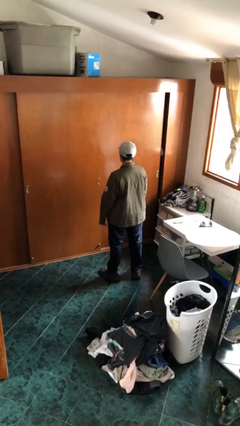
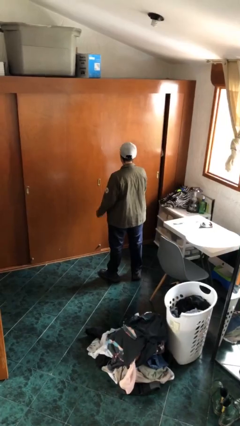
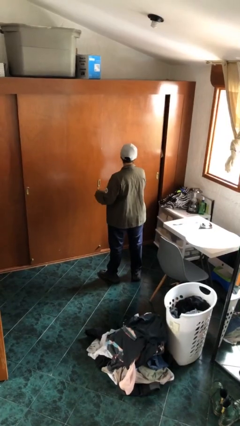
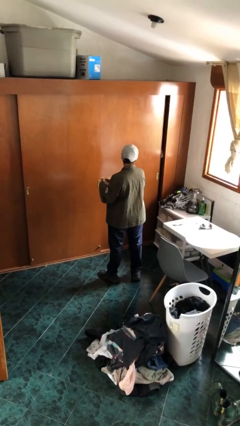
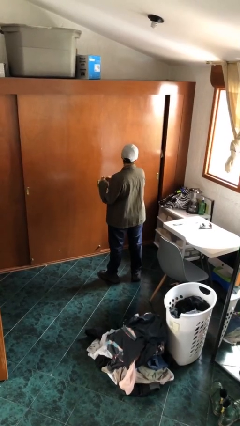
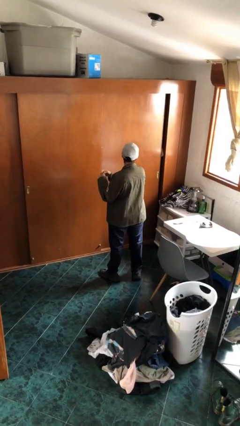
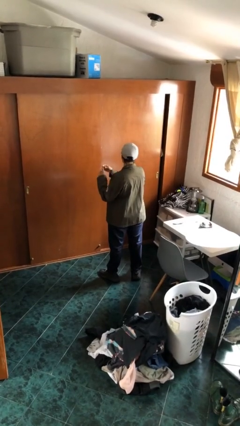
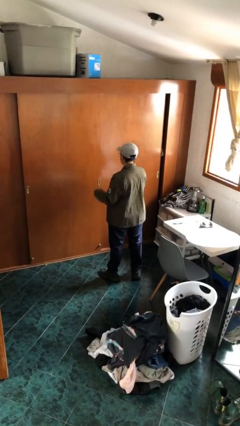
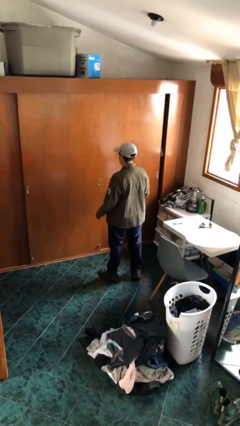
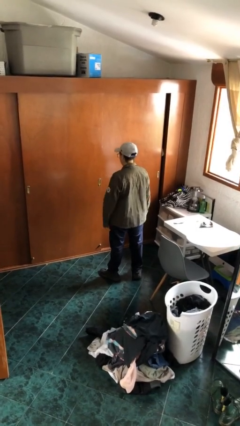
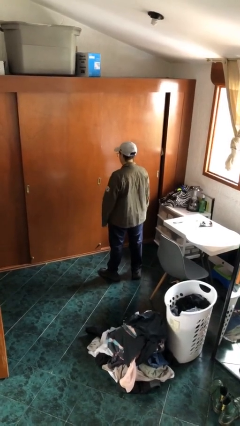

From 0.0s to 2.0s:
person takes off ring

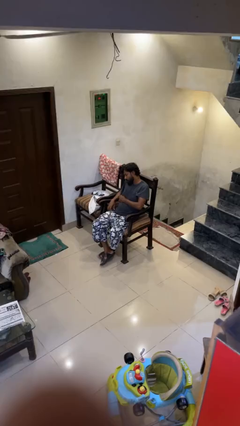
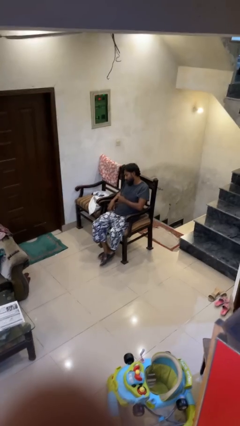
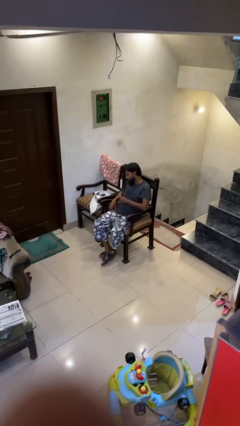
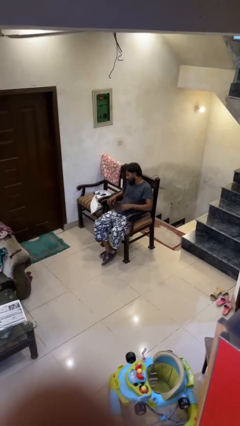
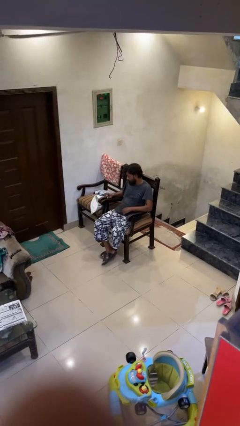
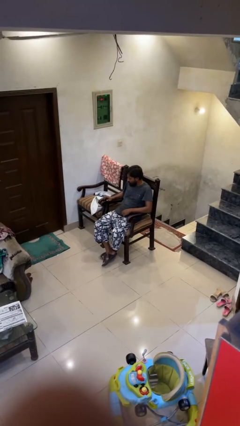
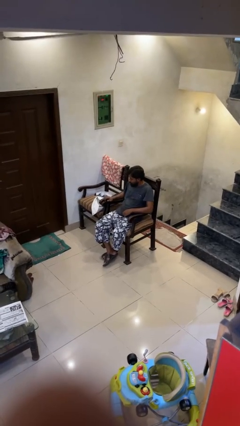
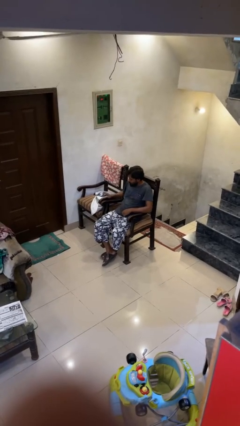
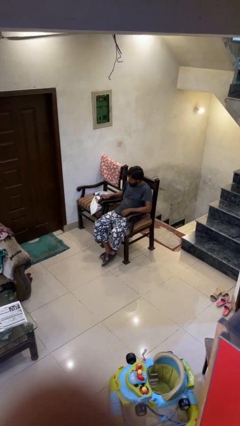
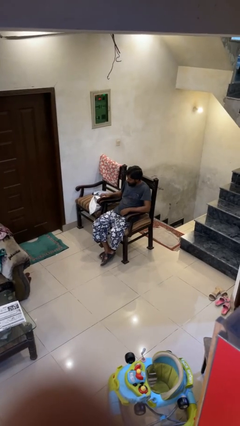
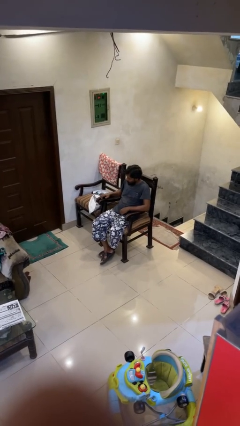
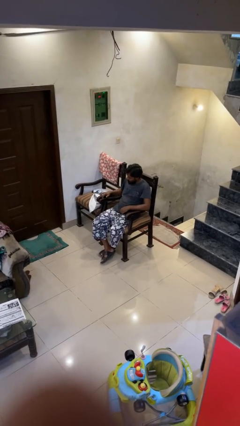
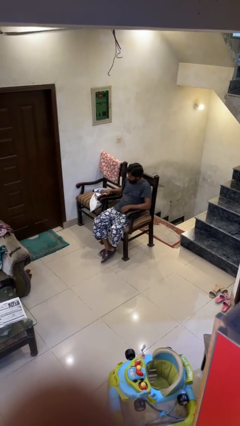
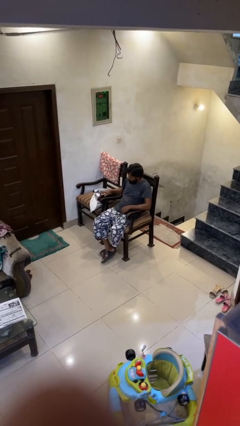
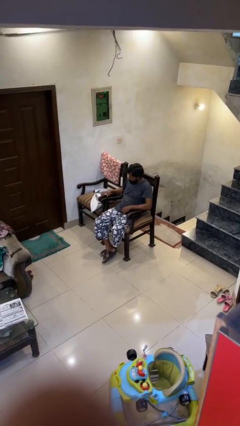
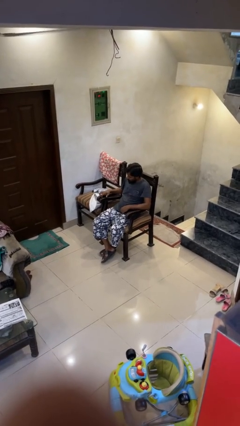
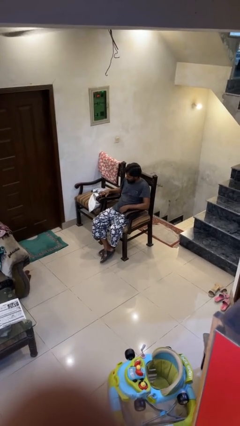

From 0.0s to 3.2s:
person taps object with finger

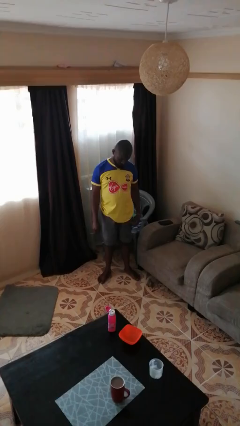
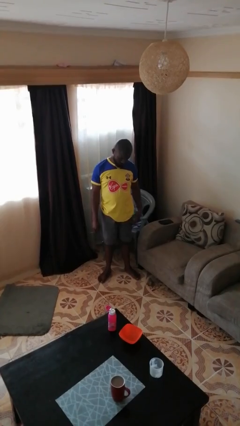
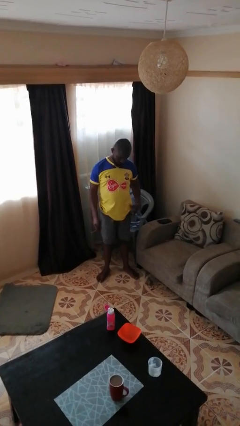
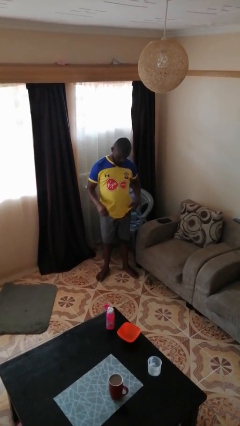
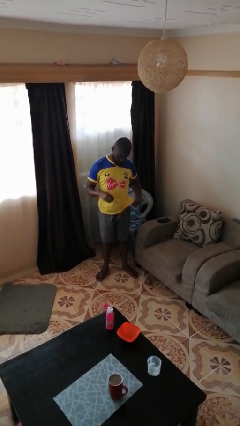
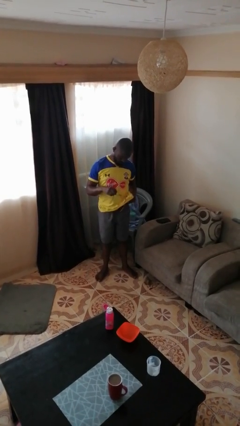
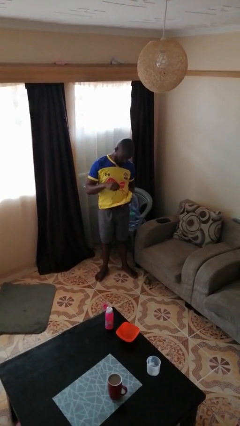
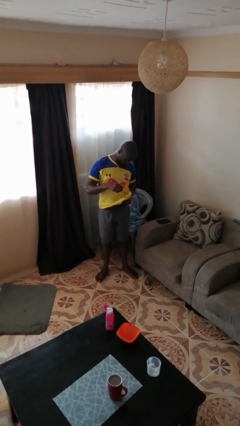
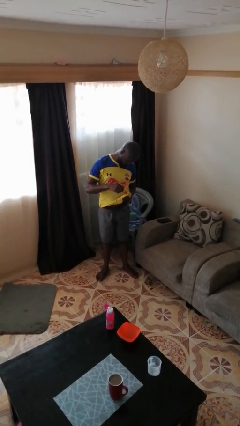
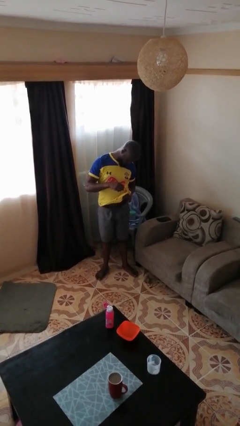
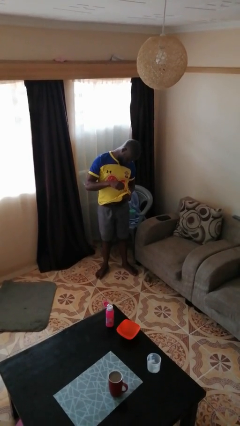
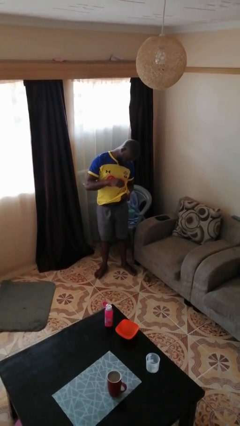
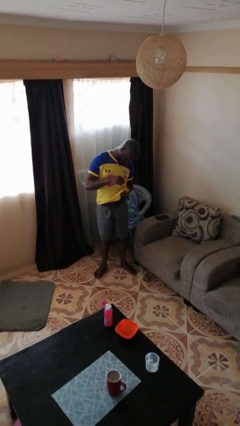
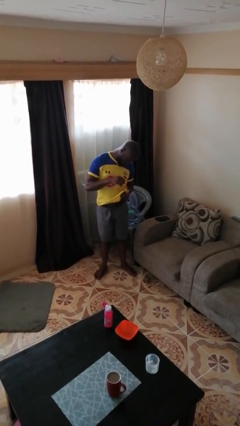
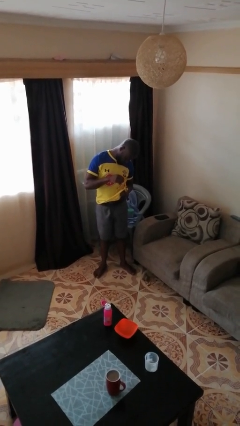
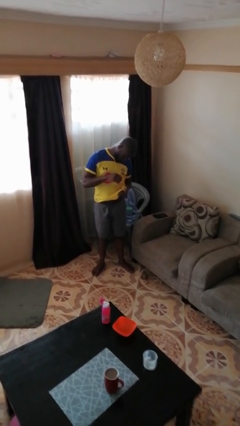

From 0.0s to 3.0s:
person cleans eyeglasses

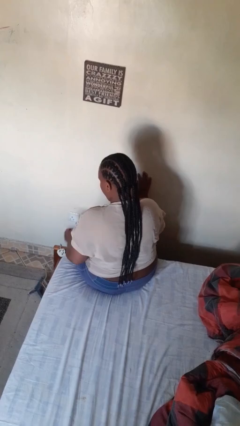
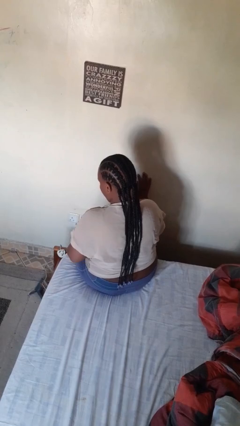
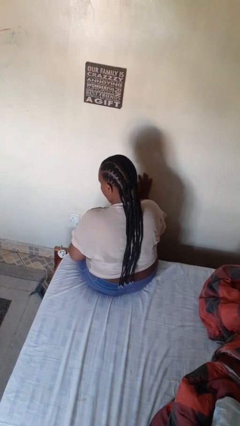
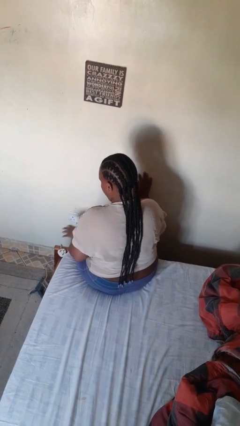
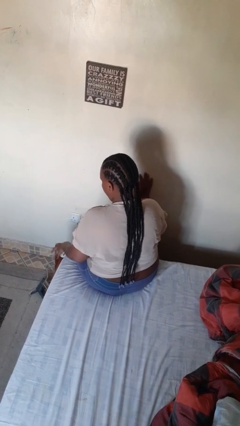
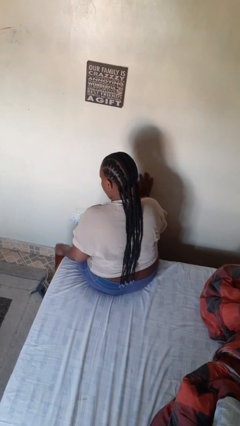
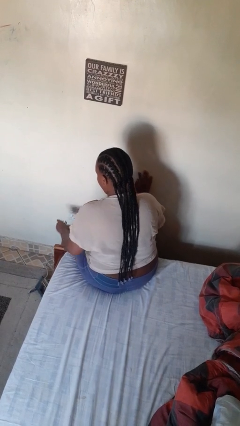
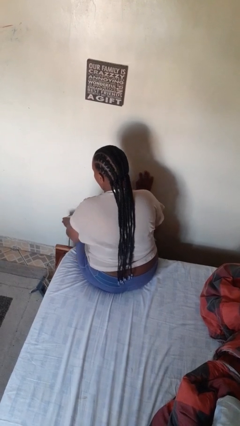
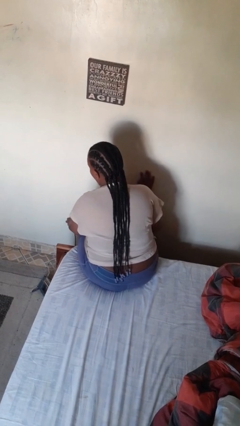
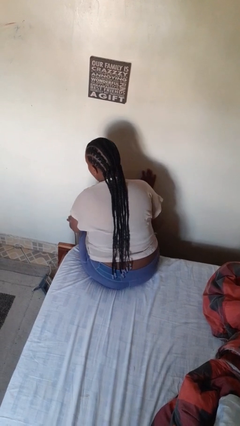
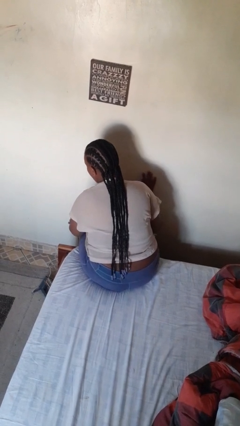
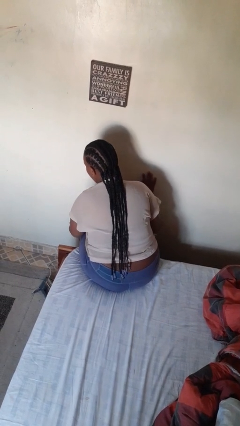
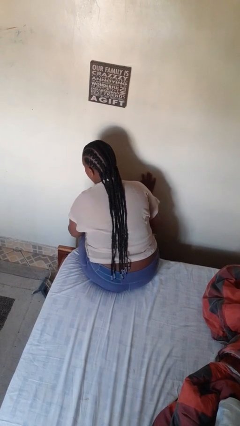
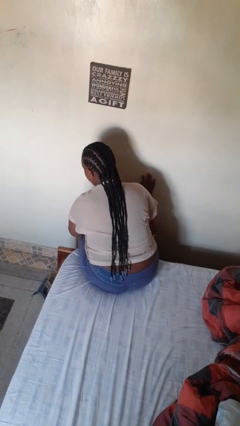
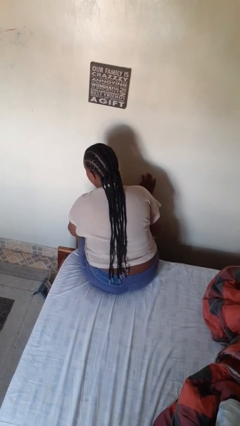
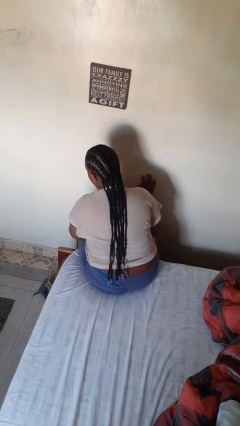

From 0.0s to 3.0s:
person plugs into electrical socket

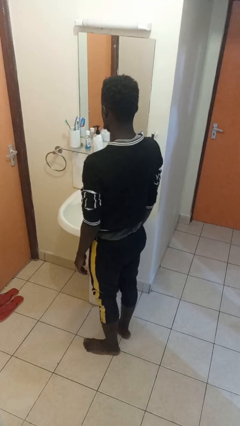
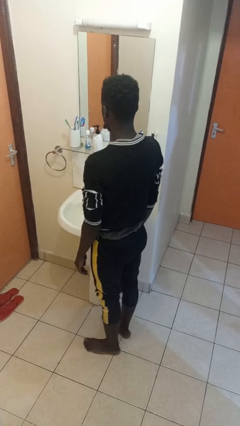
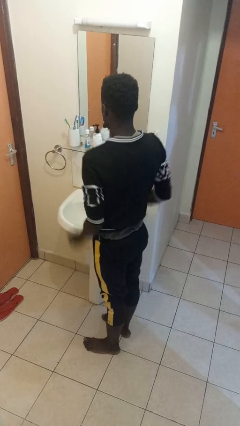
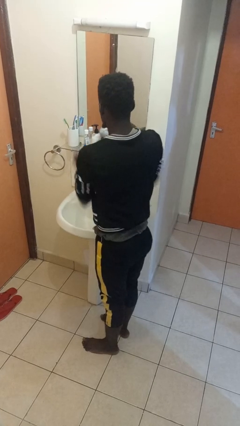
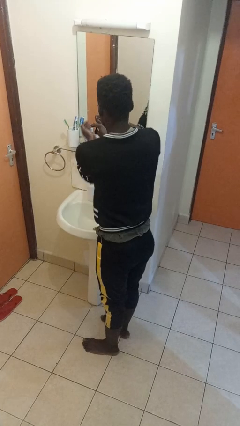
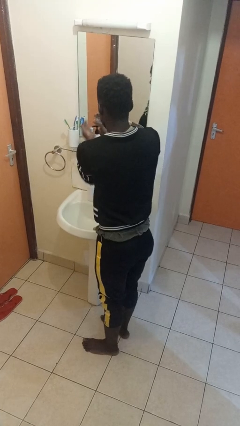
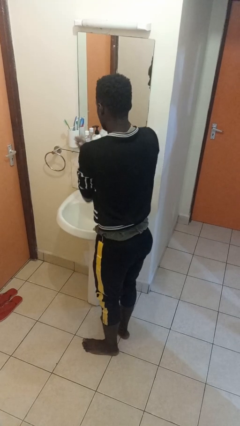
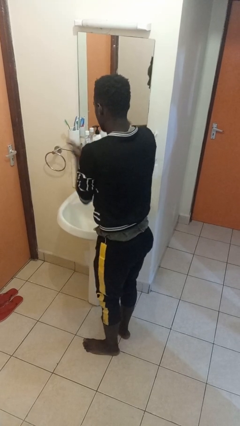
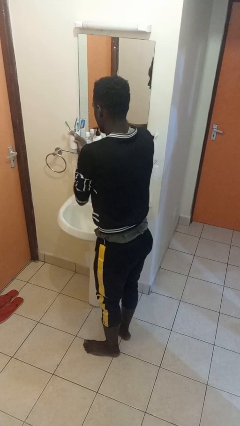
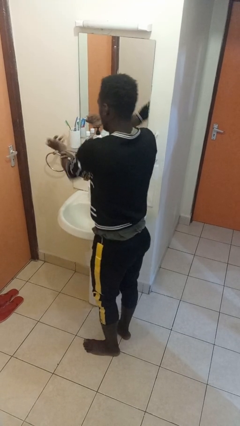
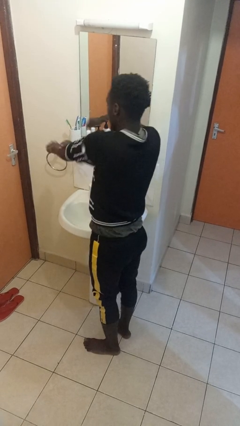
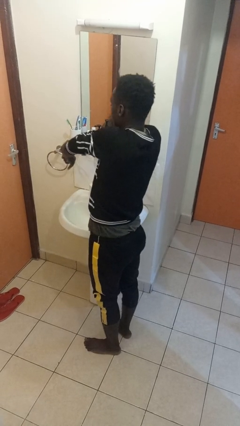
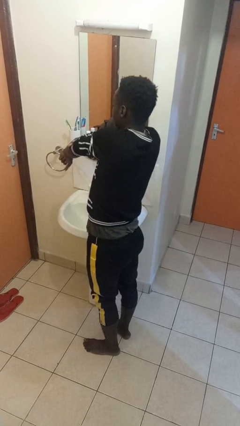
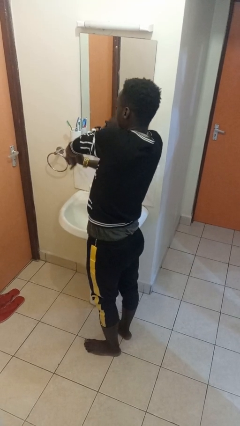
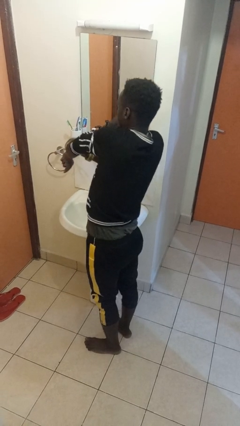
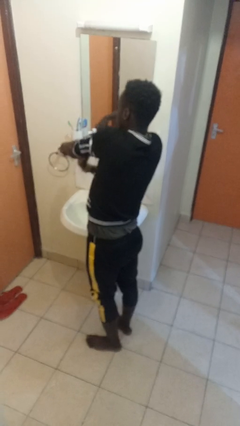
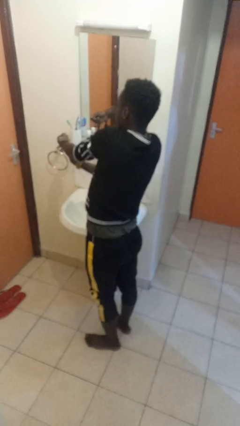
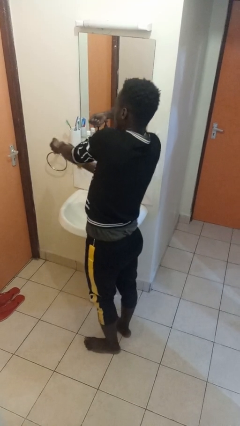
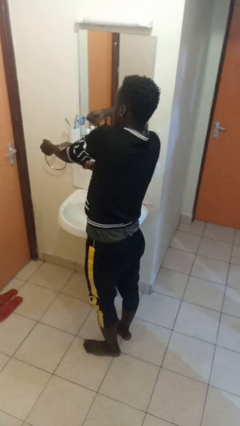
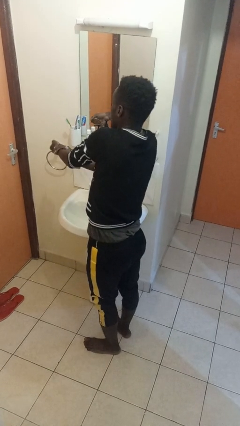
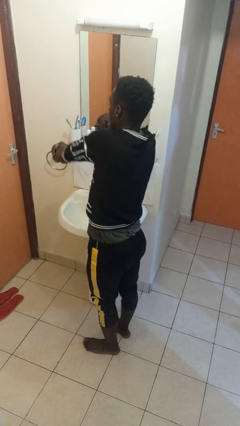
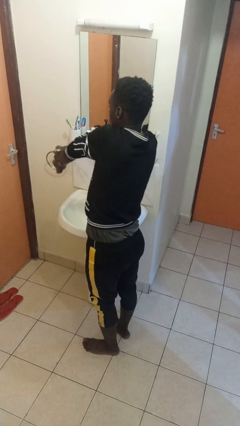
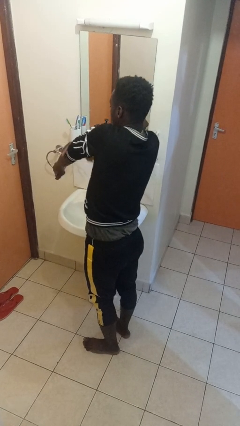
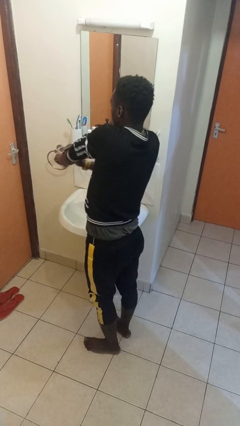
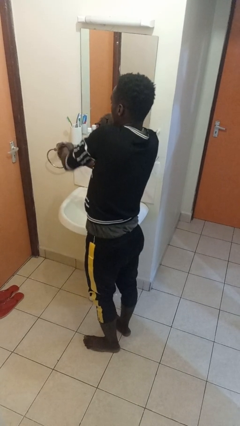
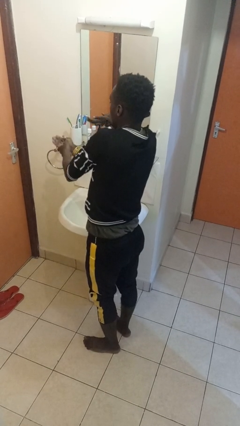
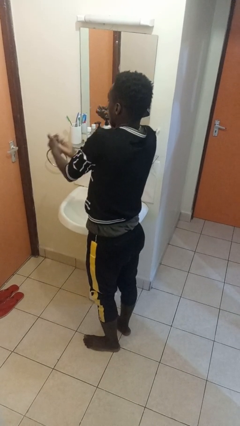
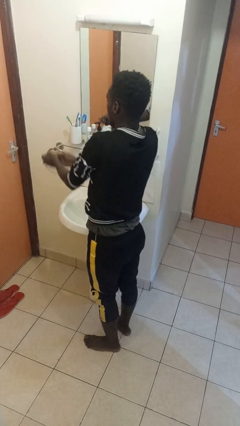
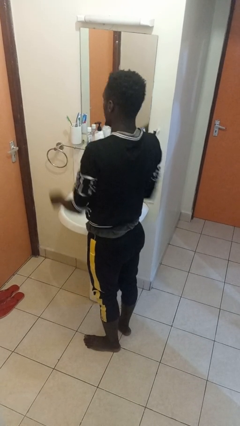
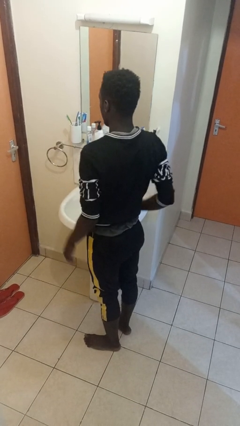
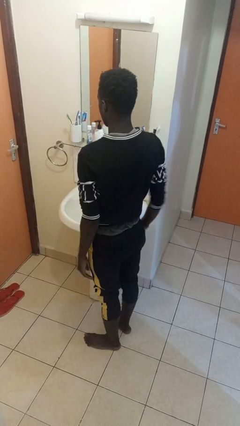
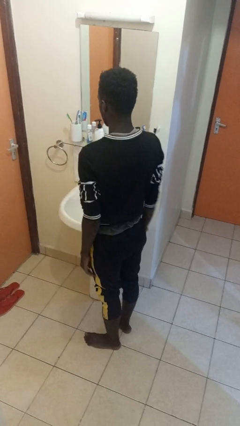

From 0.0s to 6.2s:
person applies facial moisturizer
